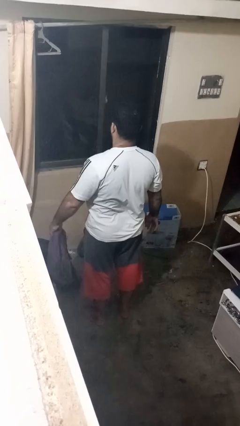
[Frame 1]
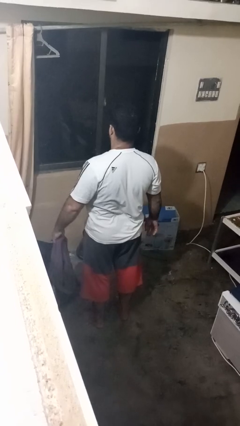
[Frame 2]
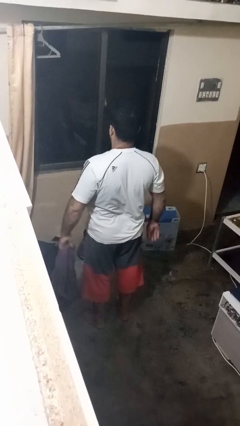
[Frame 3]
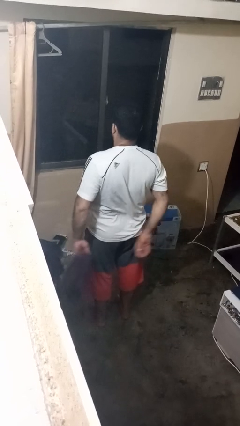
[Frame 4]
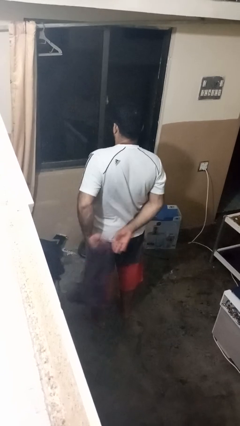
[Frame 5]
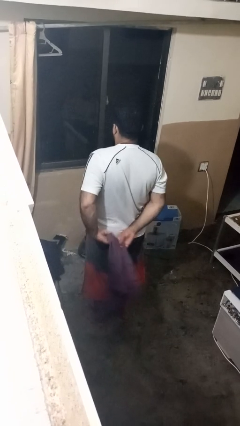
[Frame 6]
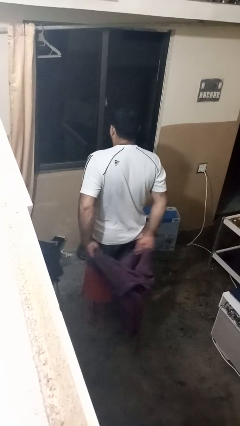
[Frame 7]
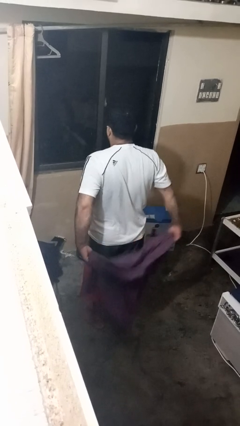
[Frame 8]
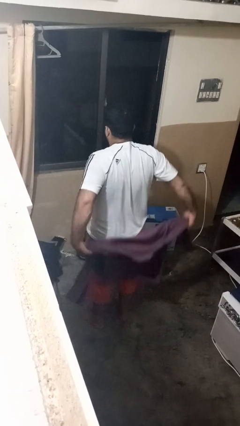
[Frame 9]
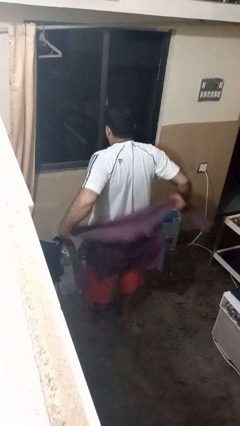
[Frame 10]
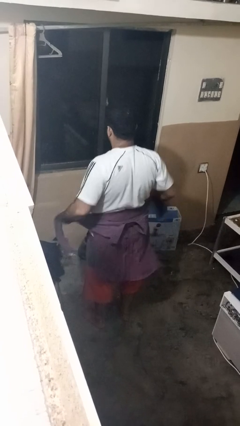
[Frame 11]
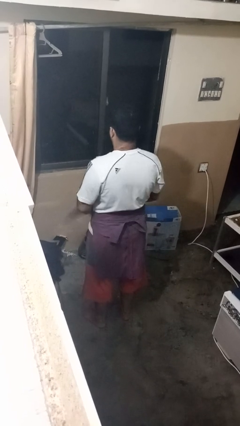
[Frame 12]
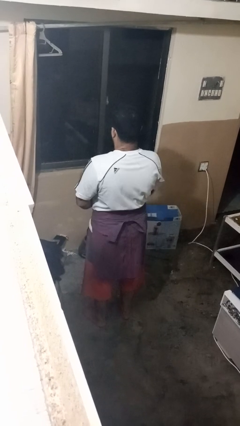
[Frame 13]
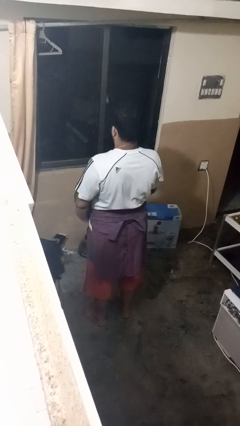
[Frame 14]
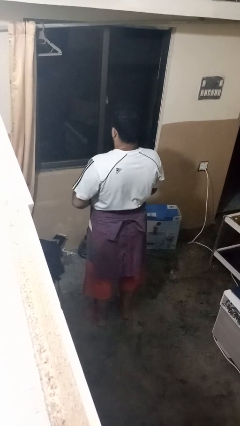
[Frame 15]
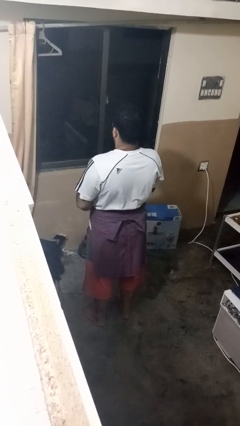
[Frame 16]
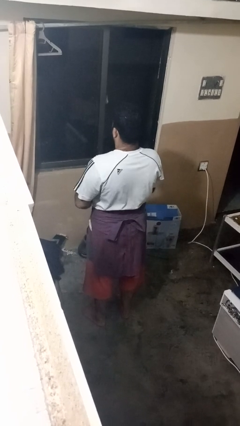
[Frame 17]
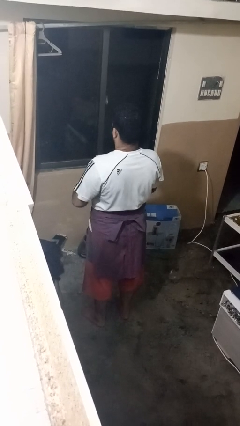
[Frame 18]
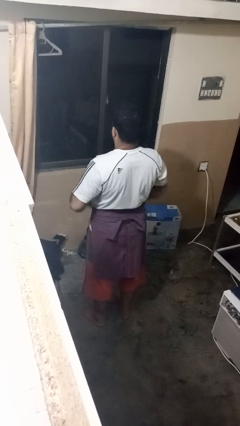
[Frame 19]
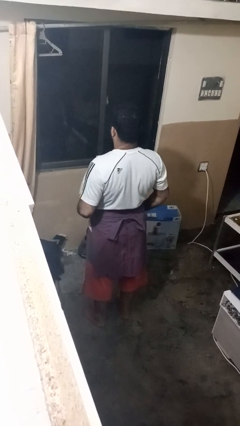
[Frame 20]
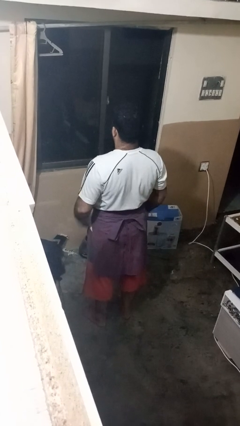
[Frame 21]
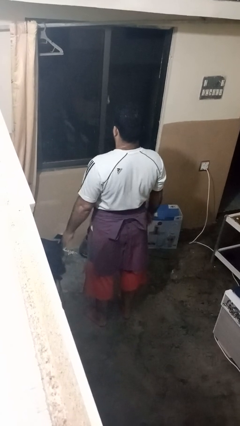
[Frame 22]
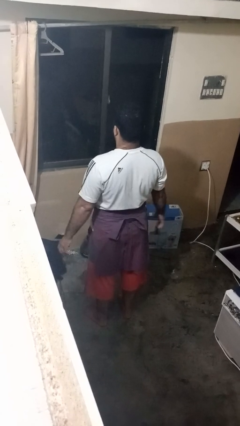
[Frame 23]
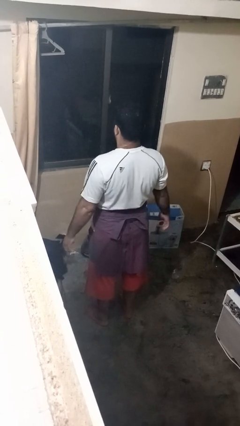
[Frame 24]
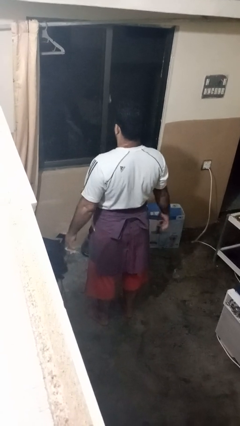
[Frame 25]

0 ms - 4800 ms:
person ties jacket around waist

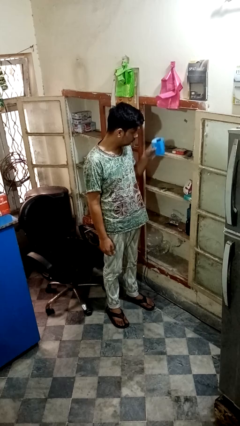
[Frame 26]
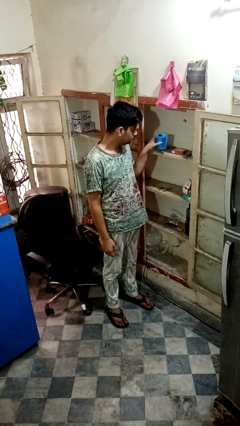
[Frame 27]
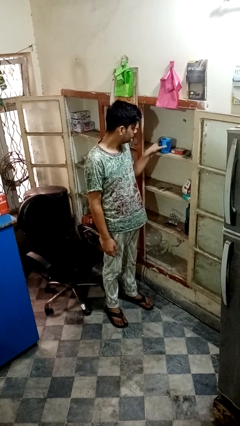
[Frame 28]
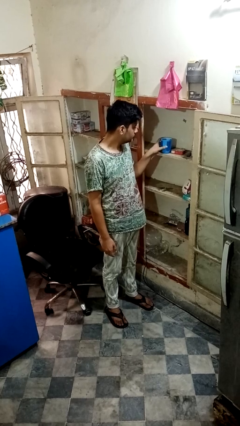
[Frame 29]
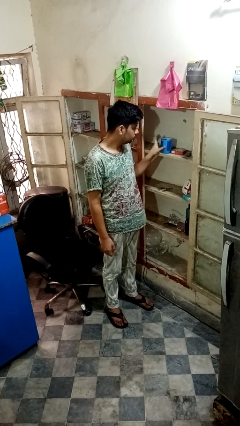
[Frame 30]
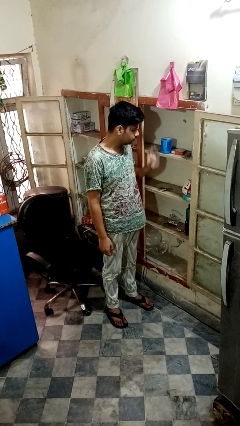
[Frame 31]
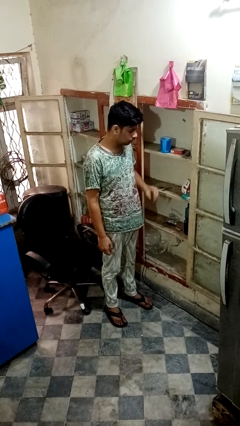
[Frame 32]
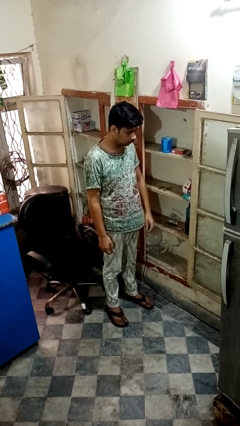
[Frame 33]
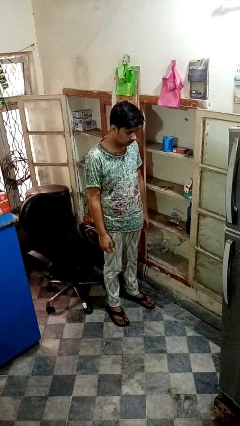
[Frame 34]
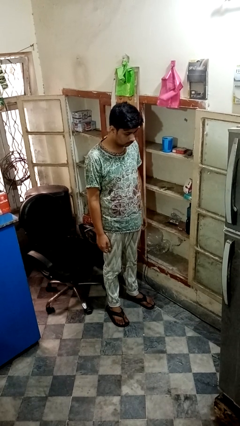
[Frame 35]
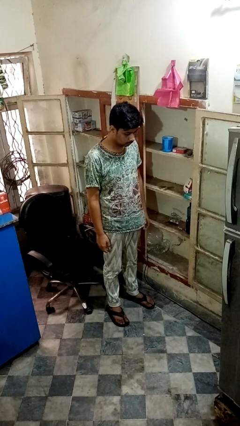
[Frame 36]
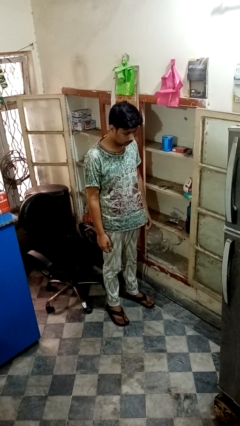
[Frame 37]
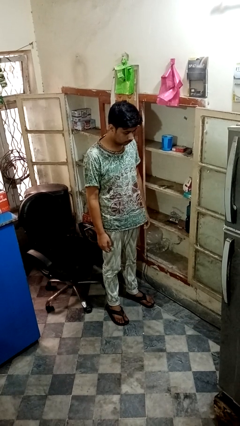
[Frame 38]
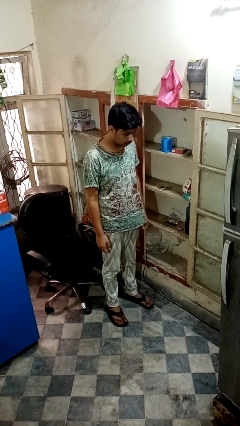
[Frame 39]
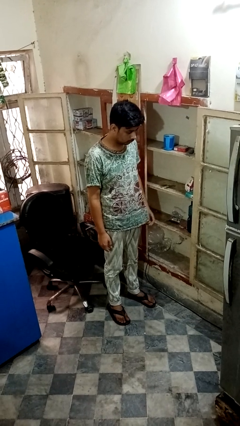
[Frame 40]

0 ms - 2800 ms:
person puts object in cabinet

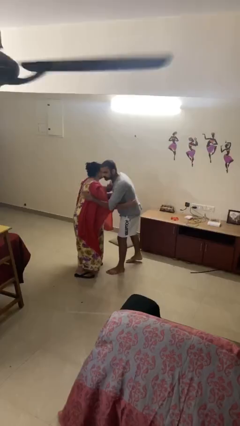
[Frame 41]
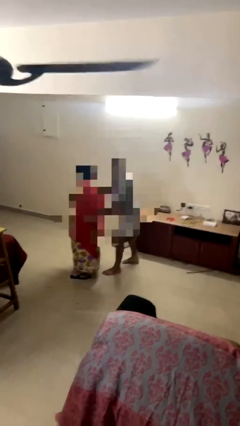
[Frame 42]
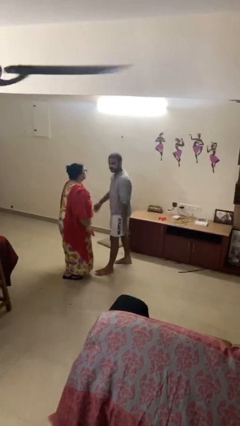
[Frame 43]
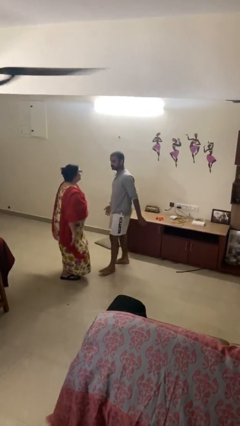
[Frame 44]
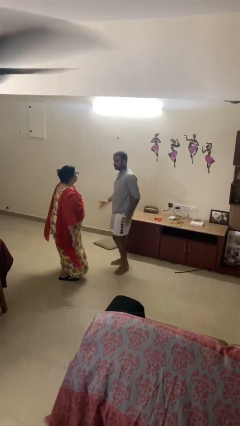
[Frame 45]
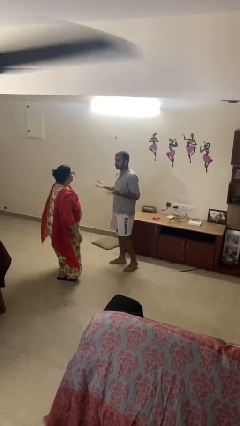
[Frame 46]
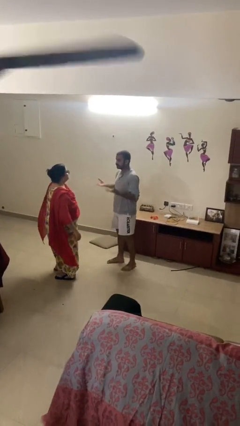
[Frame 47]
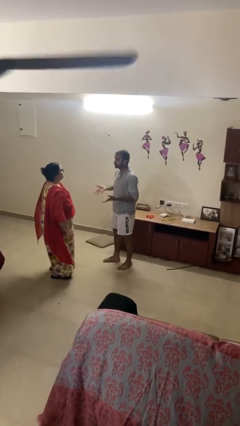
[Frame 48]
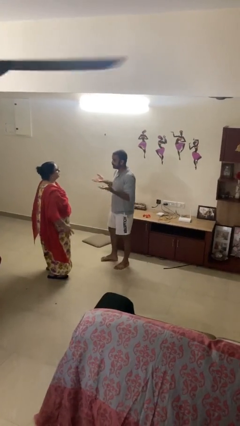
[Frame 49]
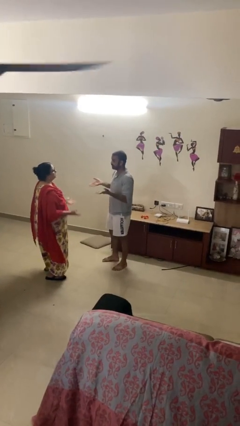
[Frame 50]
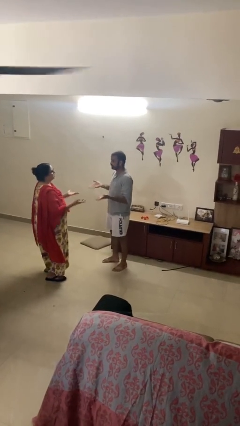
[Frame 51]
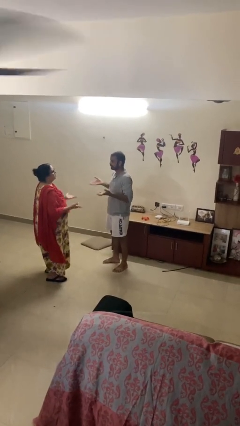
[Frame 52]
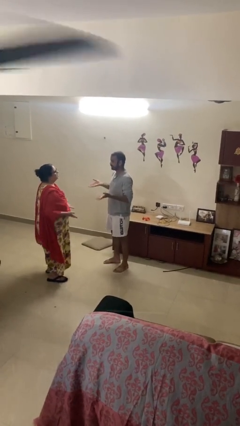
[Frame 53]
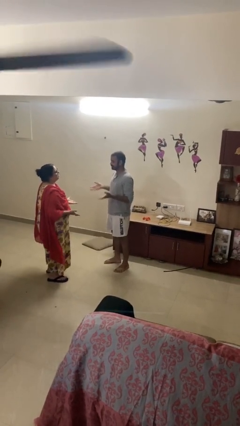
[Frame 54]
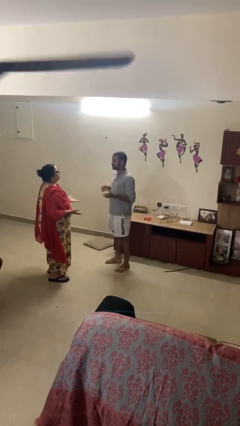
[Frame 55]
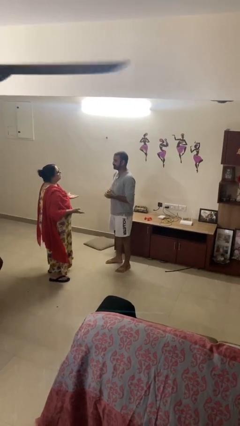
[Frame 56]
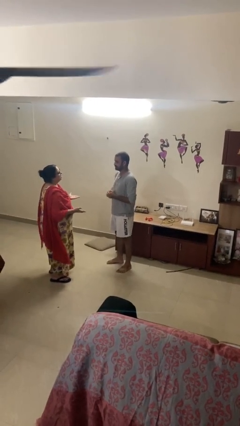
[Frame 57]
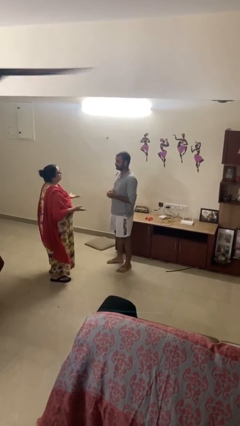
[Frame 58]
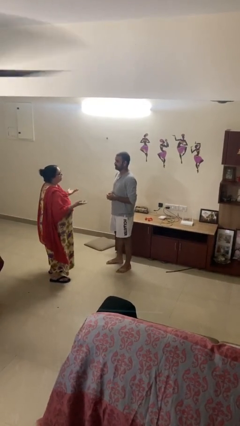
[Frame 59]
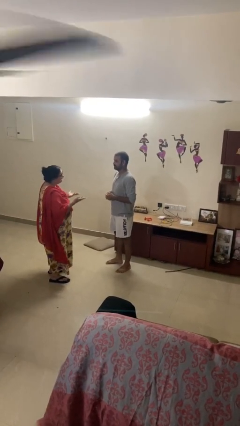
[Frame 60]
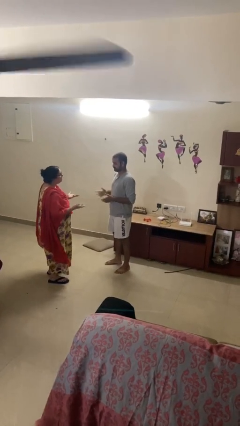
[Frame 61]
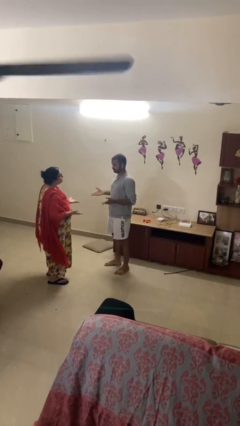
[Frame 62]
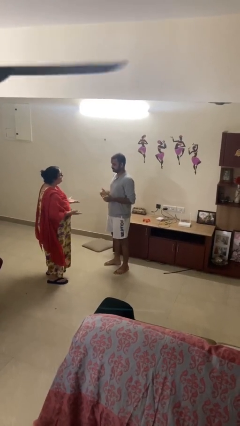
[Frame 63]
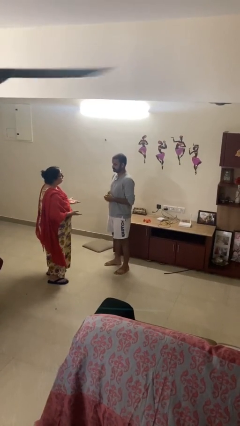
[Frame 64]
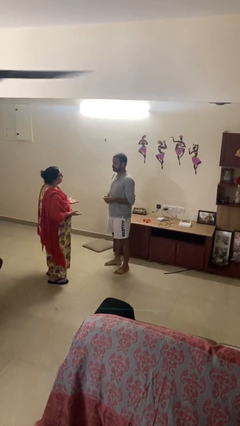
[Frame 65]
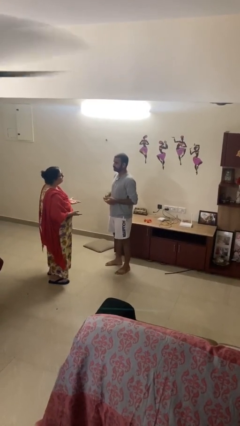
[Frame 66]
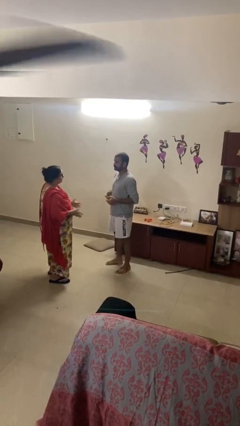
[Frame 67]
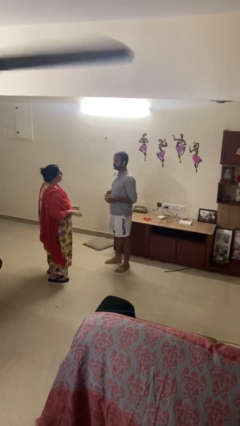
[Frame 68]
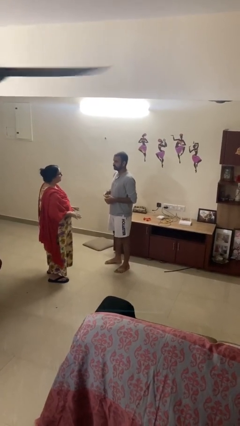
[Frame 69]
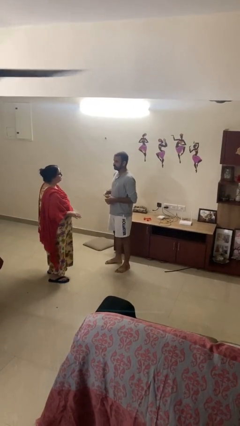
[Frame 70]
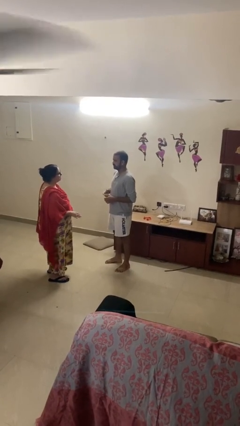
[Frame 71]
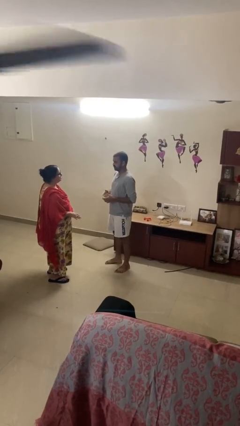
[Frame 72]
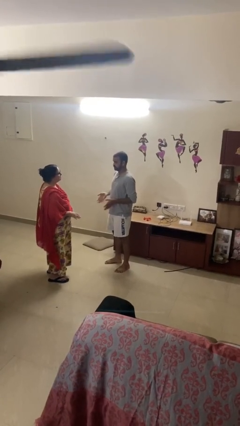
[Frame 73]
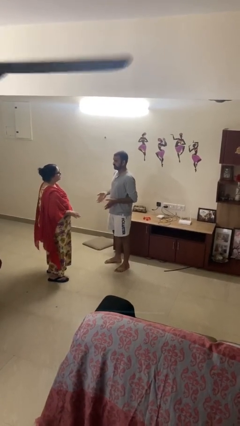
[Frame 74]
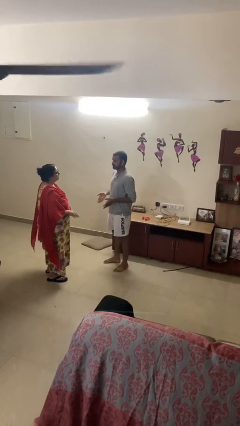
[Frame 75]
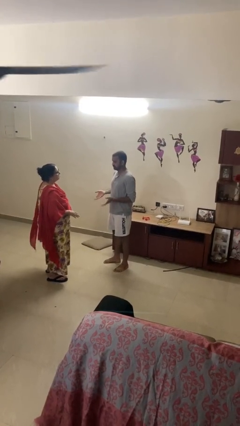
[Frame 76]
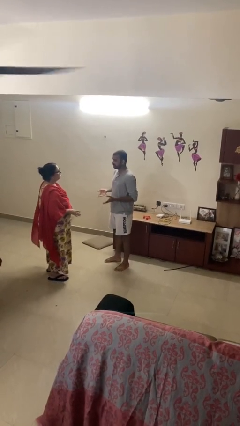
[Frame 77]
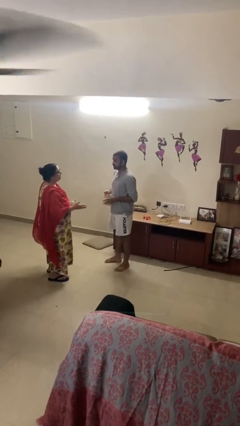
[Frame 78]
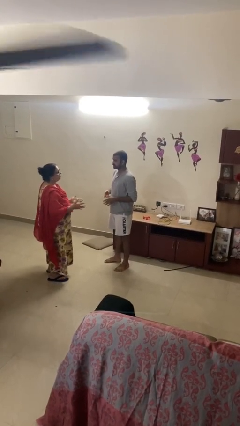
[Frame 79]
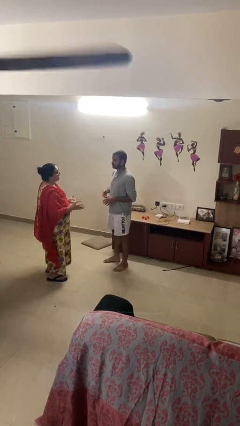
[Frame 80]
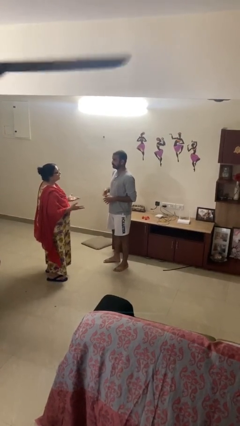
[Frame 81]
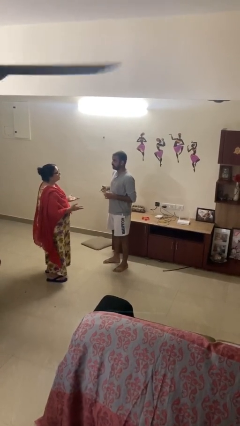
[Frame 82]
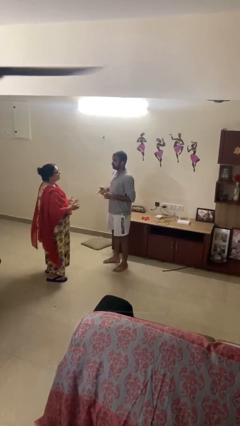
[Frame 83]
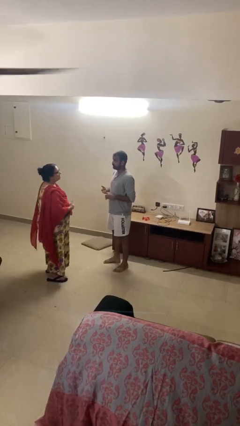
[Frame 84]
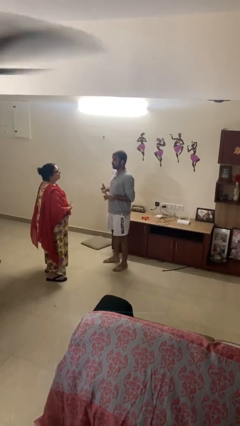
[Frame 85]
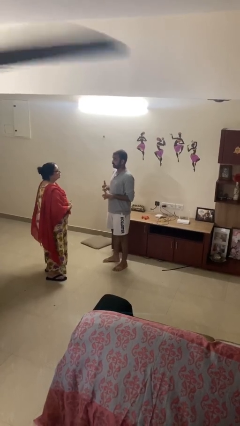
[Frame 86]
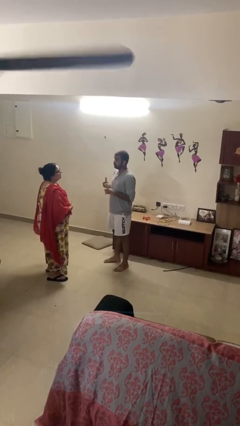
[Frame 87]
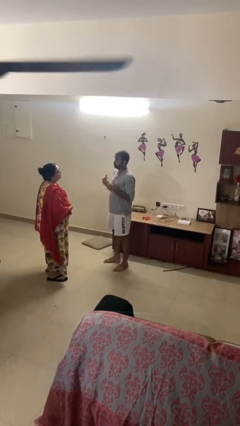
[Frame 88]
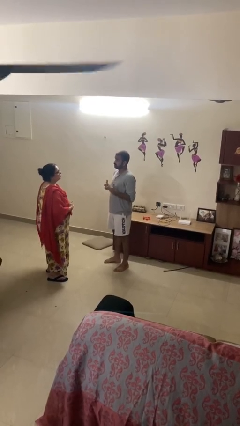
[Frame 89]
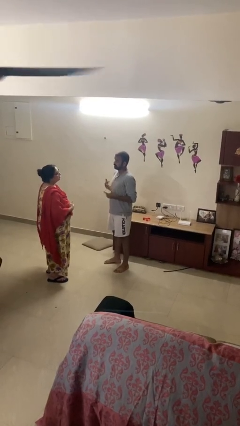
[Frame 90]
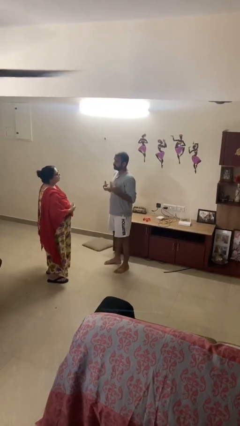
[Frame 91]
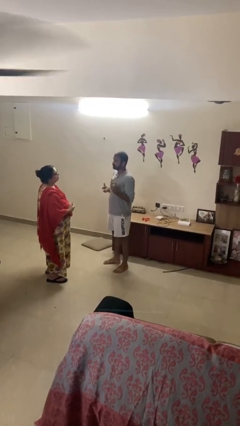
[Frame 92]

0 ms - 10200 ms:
person talks to person

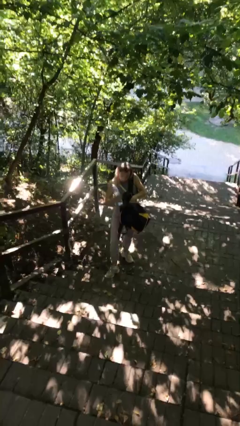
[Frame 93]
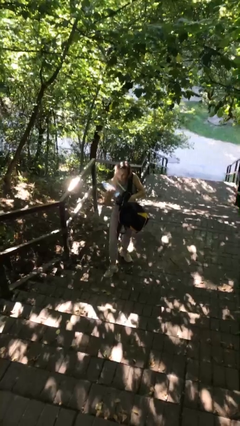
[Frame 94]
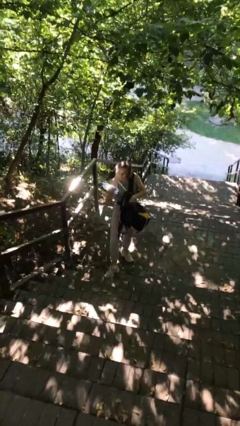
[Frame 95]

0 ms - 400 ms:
person takes object from backpack
